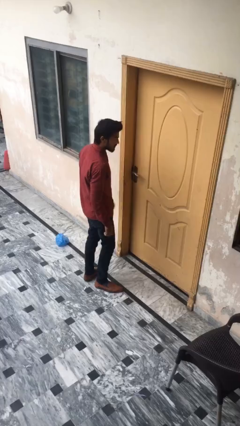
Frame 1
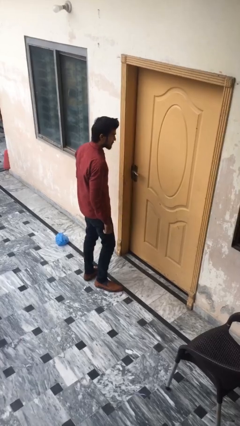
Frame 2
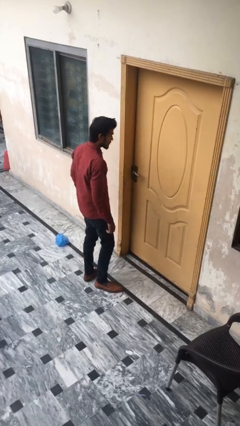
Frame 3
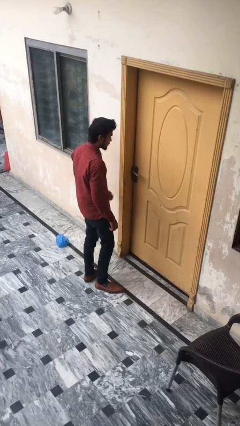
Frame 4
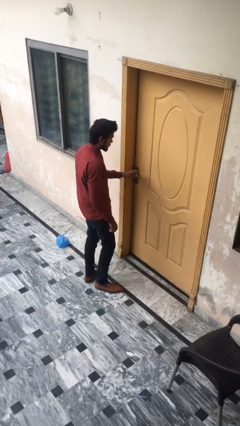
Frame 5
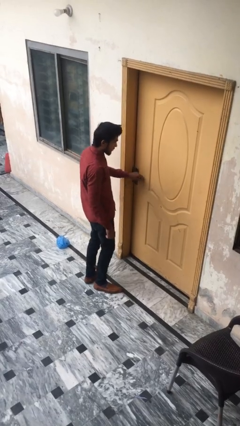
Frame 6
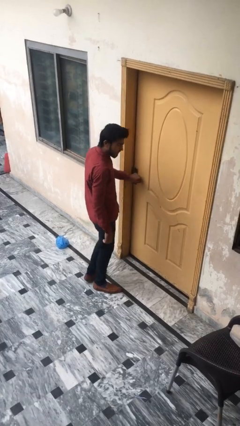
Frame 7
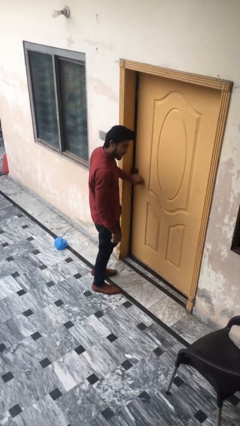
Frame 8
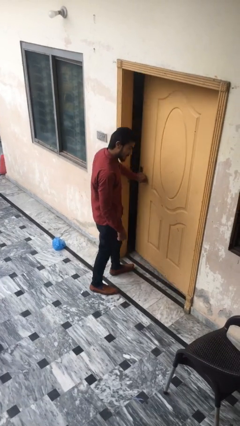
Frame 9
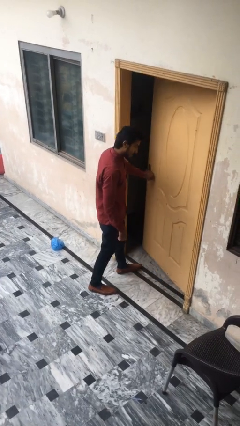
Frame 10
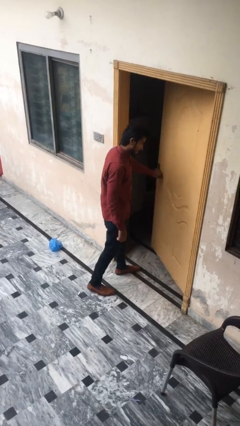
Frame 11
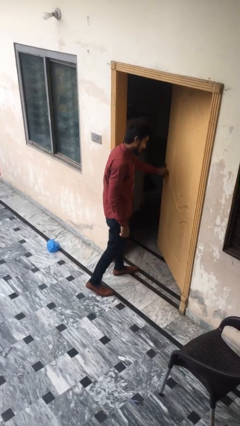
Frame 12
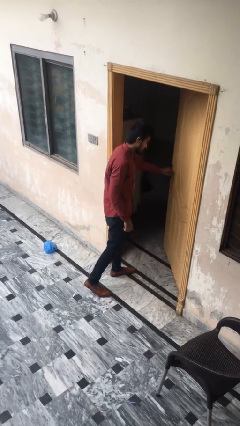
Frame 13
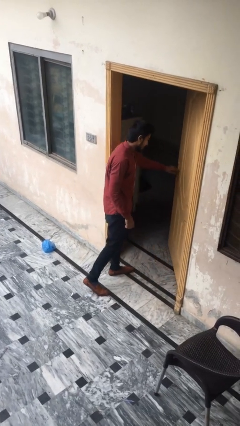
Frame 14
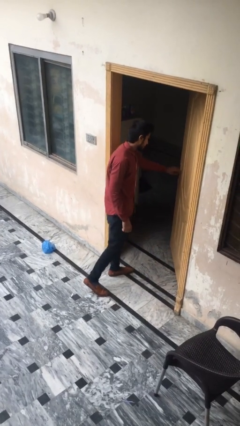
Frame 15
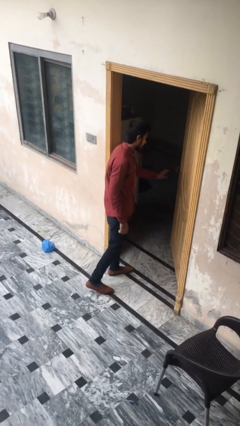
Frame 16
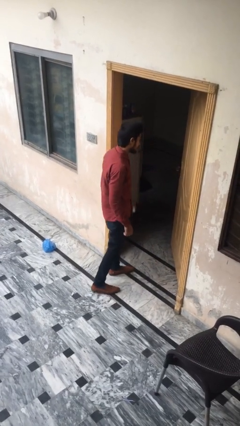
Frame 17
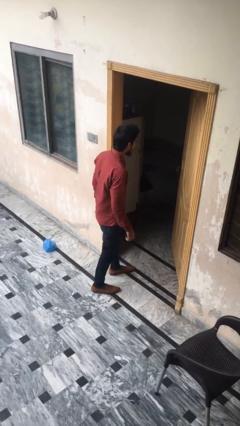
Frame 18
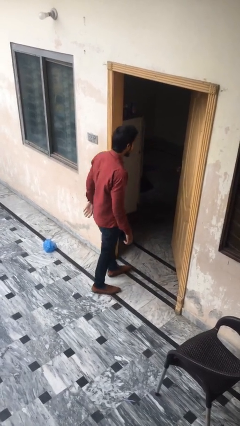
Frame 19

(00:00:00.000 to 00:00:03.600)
person opens facility door

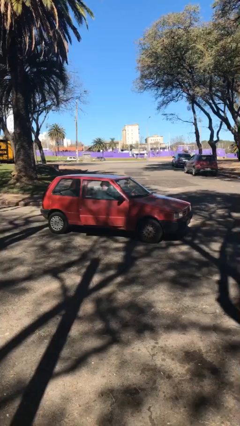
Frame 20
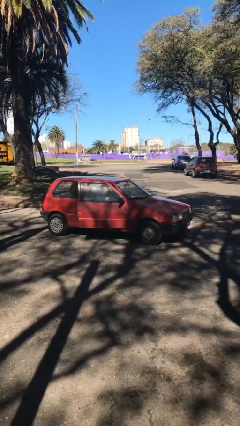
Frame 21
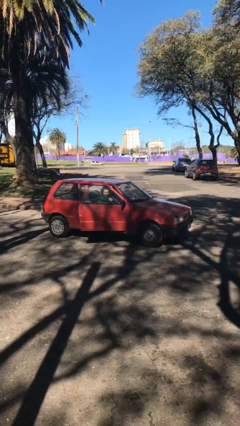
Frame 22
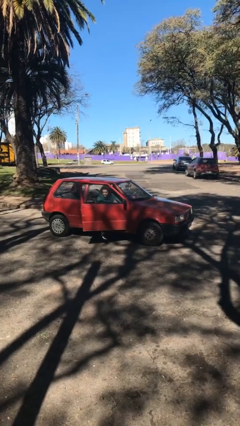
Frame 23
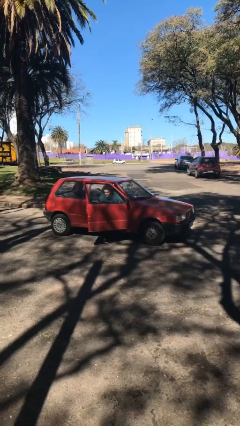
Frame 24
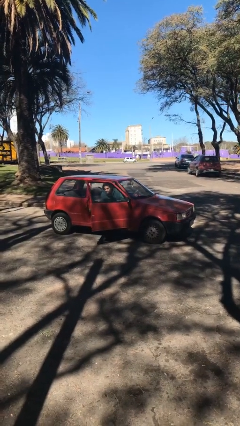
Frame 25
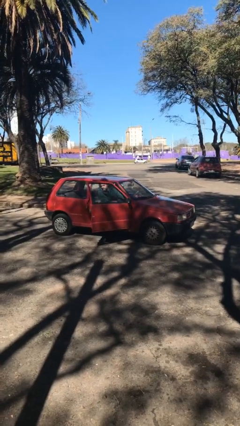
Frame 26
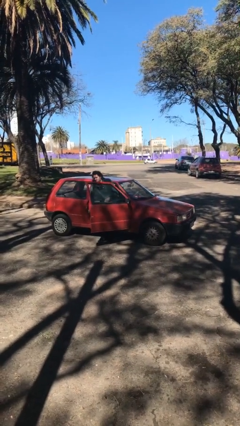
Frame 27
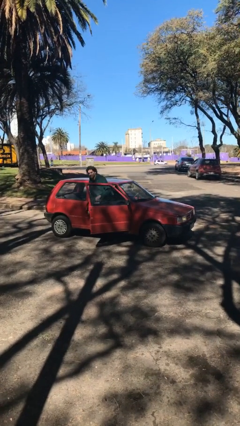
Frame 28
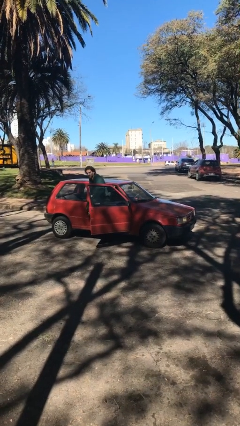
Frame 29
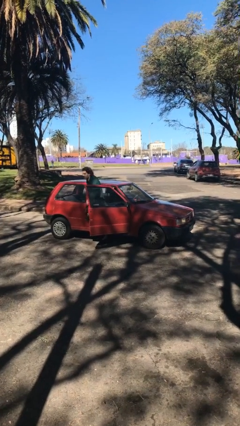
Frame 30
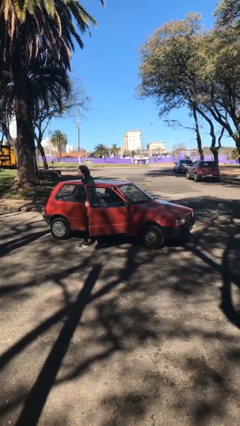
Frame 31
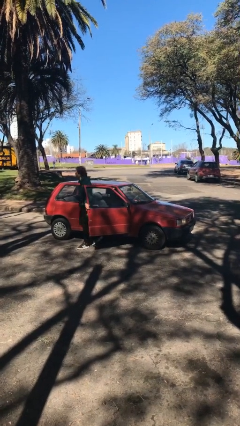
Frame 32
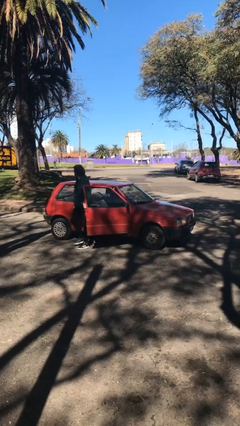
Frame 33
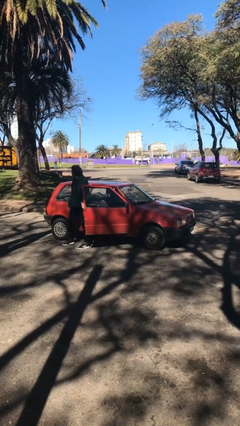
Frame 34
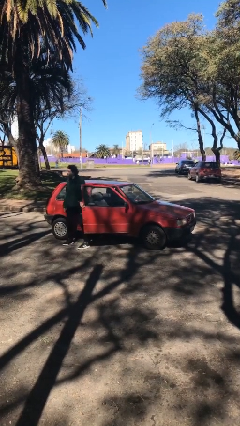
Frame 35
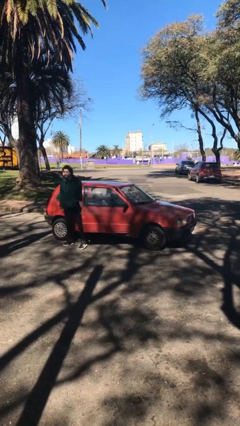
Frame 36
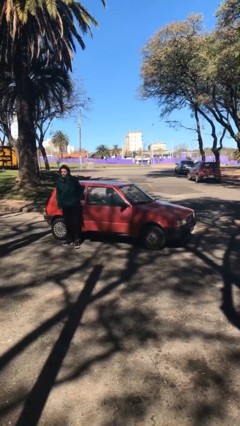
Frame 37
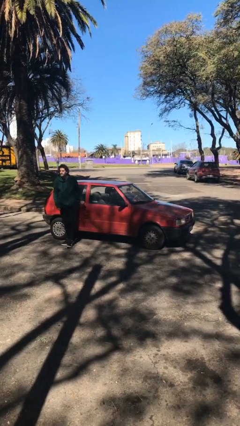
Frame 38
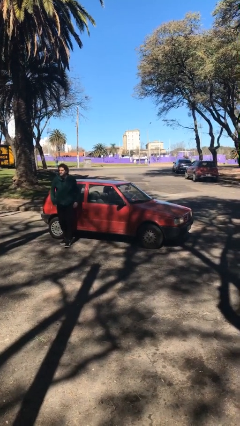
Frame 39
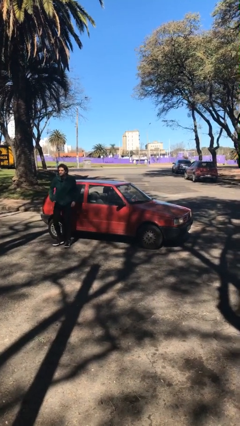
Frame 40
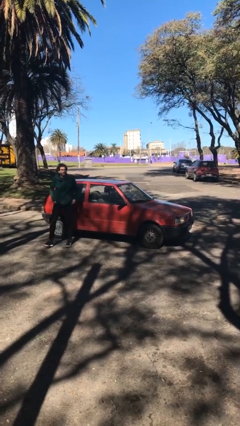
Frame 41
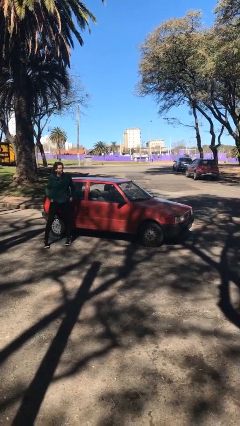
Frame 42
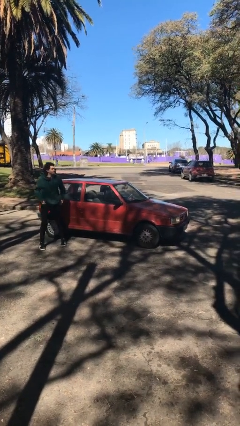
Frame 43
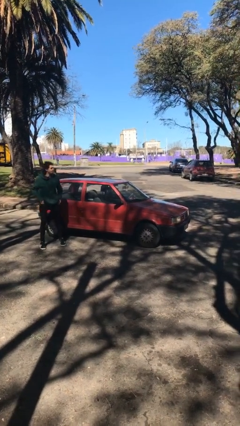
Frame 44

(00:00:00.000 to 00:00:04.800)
car drops off person

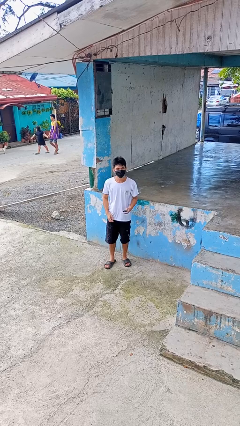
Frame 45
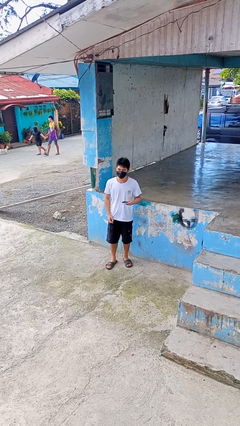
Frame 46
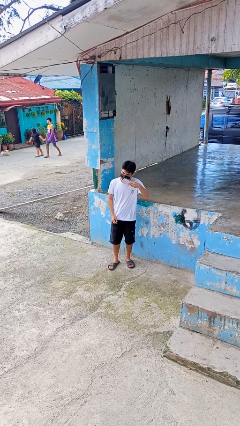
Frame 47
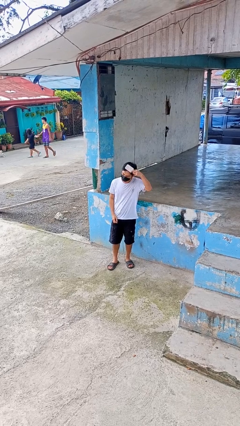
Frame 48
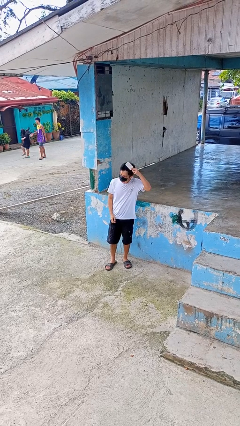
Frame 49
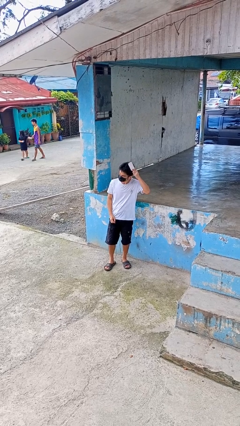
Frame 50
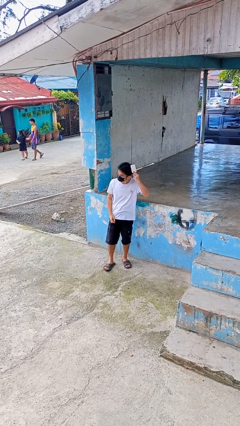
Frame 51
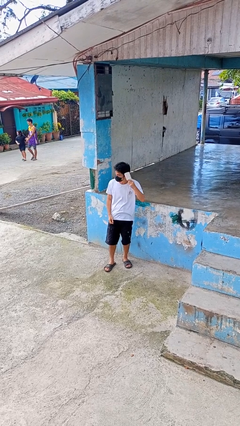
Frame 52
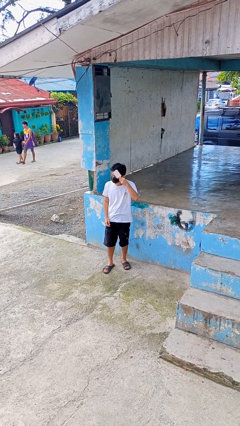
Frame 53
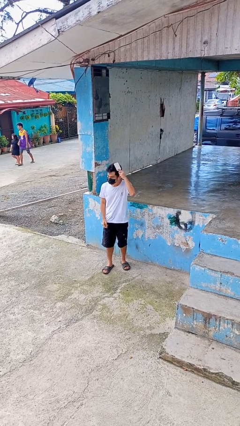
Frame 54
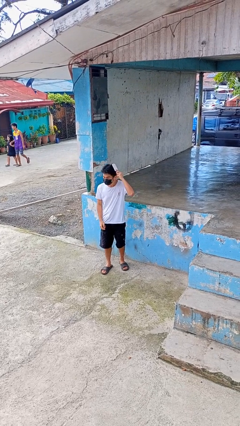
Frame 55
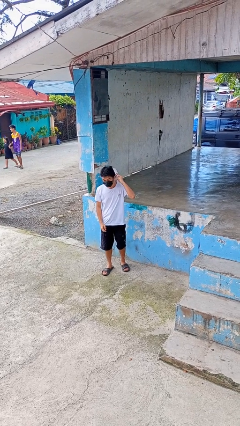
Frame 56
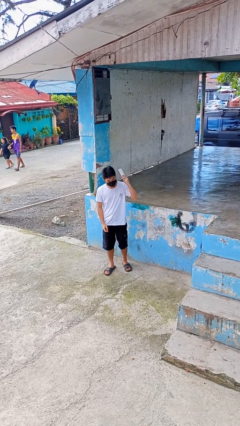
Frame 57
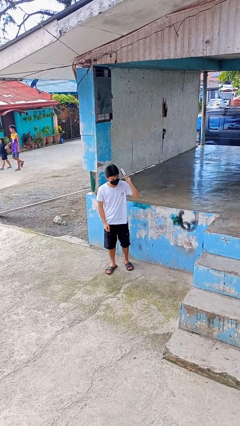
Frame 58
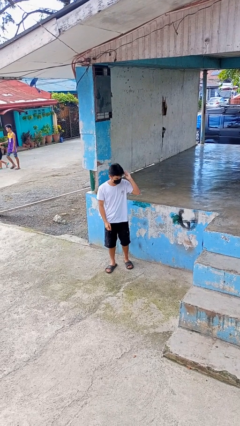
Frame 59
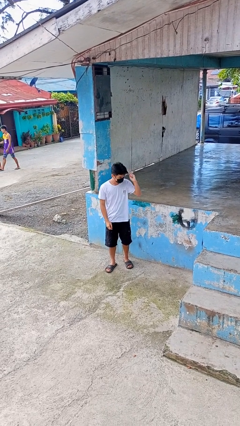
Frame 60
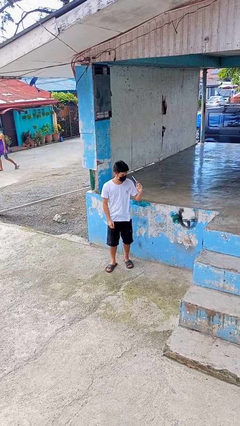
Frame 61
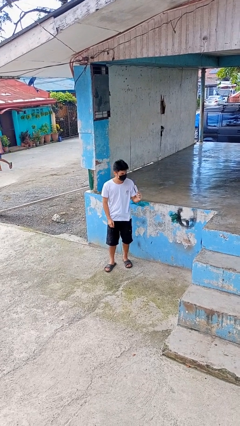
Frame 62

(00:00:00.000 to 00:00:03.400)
person brushes hair

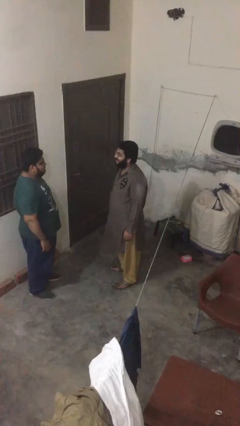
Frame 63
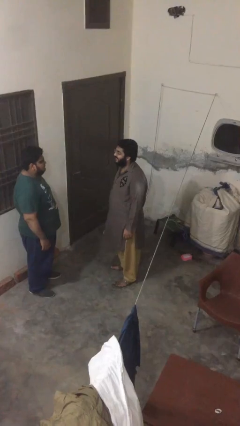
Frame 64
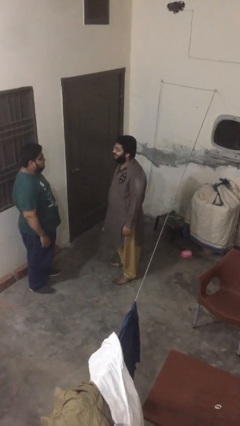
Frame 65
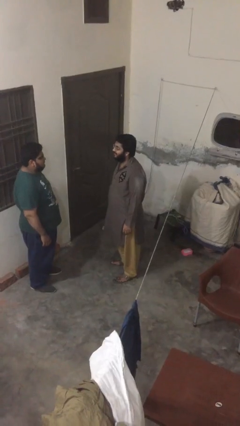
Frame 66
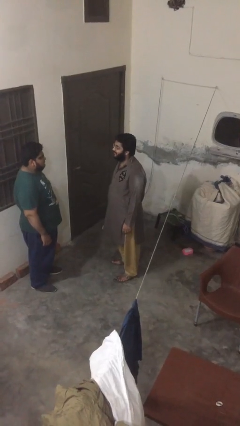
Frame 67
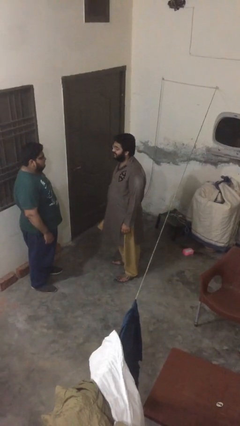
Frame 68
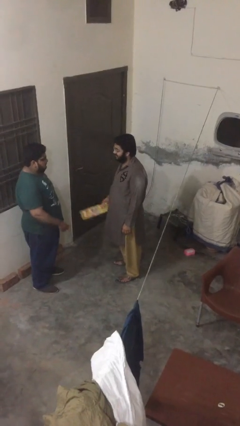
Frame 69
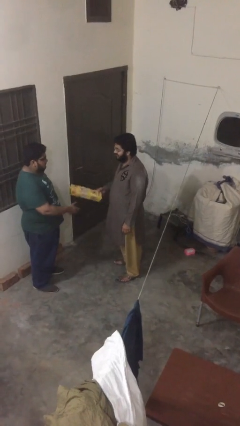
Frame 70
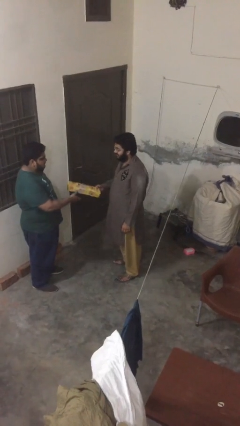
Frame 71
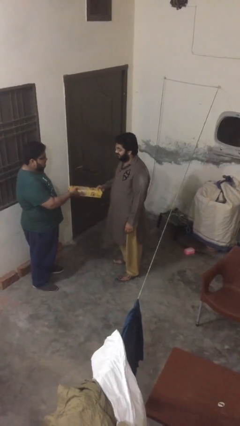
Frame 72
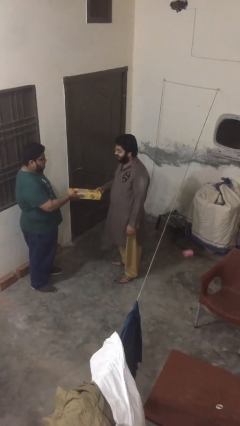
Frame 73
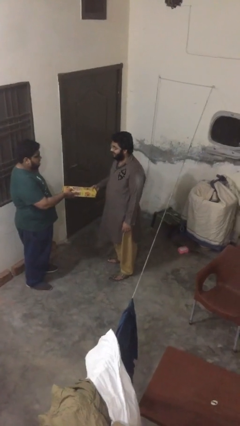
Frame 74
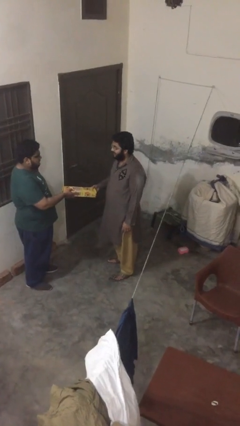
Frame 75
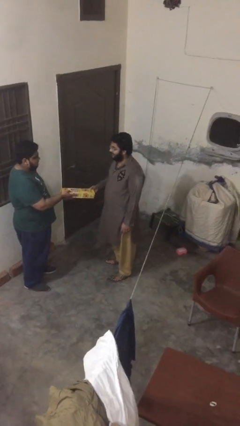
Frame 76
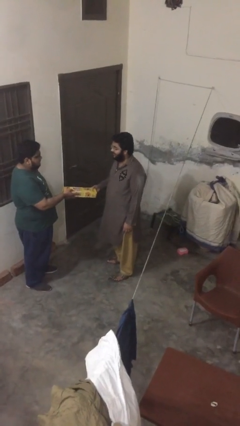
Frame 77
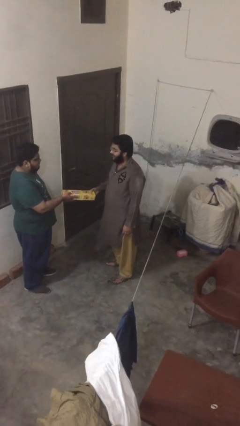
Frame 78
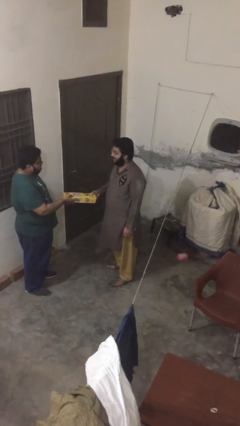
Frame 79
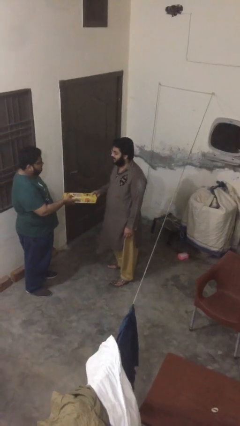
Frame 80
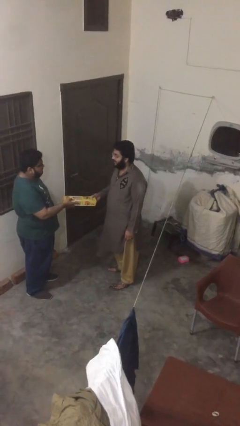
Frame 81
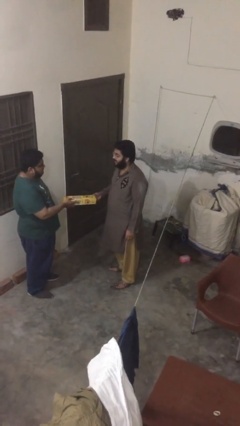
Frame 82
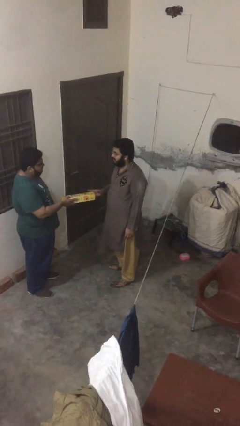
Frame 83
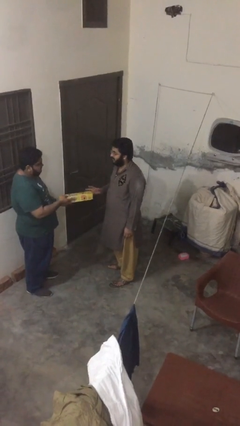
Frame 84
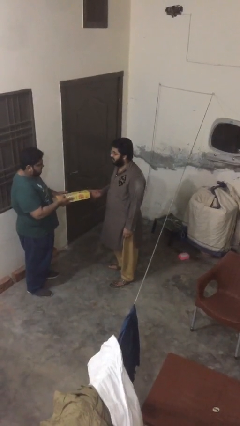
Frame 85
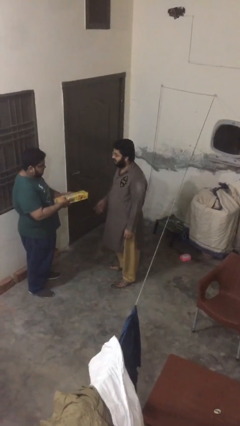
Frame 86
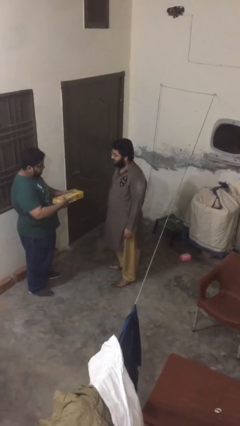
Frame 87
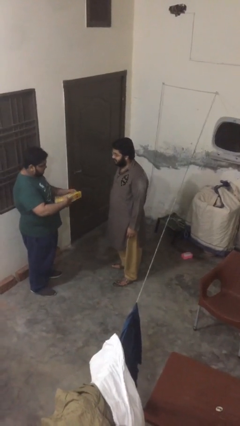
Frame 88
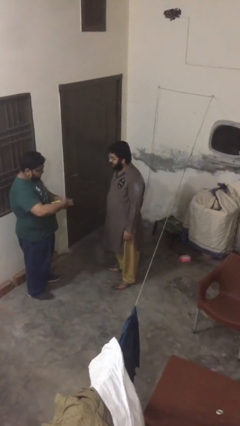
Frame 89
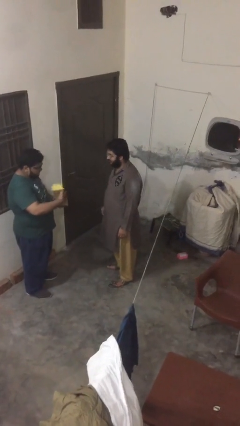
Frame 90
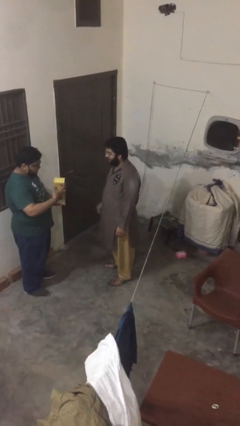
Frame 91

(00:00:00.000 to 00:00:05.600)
person transfers object to person
